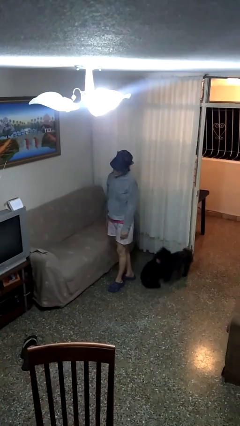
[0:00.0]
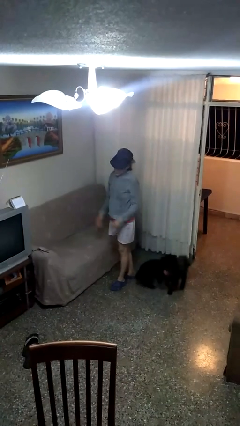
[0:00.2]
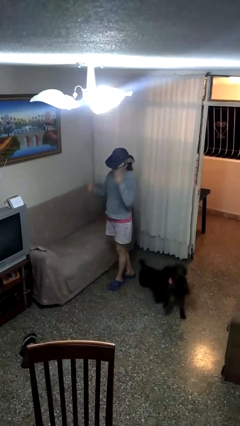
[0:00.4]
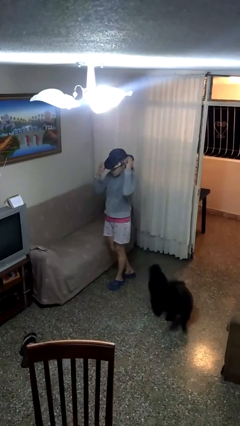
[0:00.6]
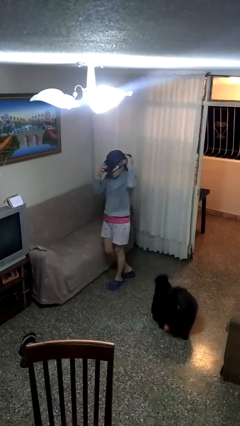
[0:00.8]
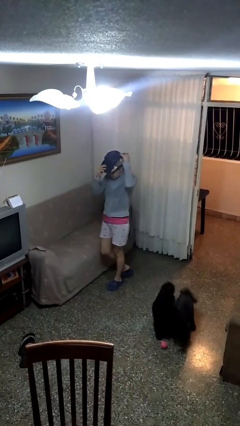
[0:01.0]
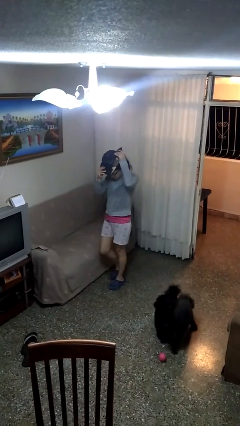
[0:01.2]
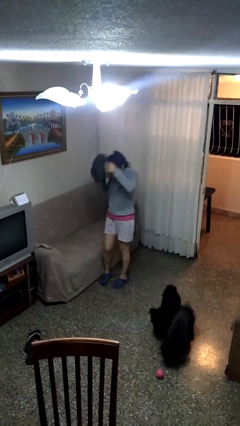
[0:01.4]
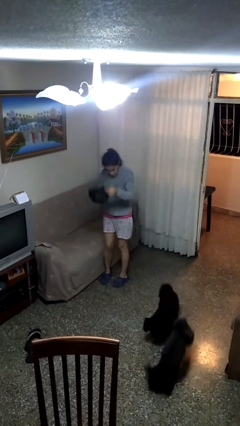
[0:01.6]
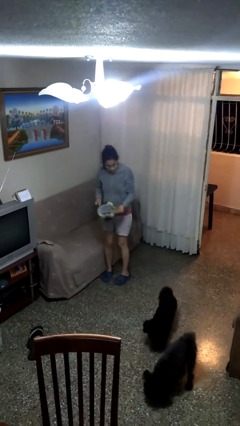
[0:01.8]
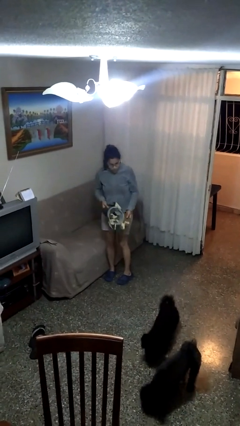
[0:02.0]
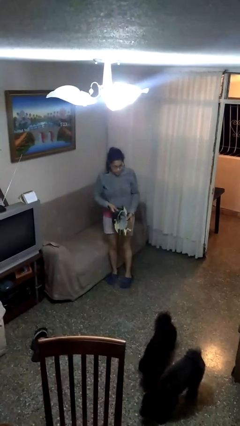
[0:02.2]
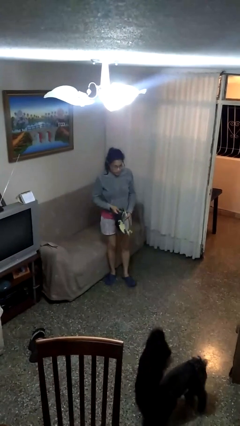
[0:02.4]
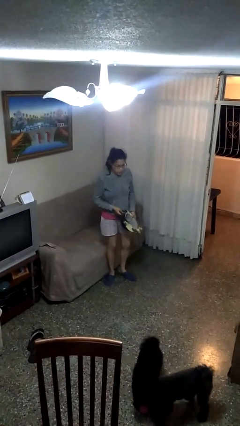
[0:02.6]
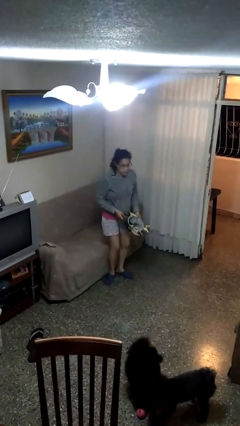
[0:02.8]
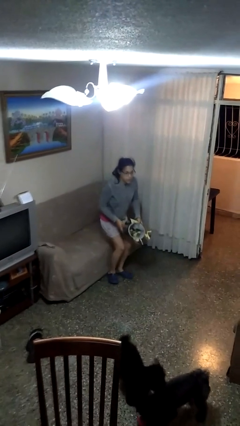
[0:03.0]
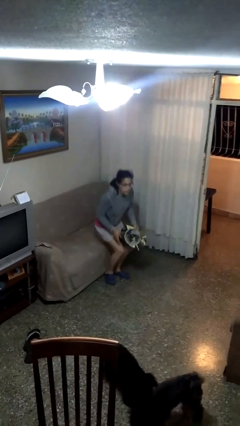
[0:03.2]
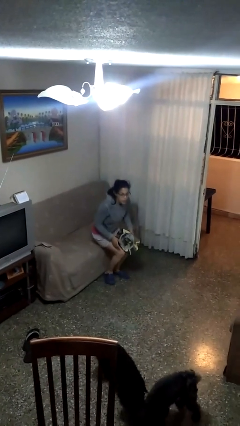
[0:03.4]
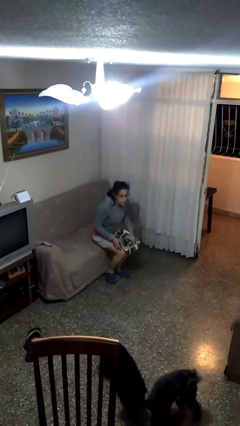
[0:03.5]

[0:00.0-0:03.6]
person takes off hat

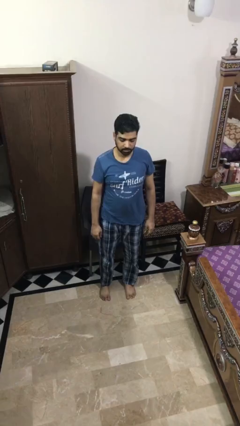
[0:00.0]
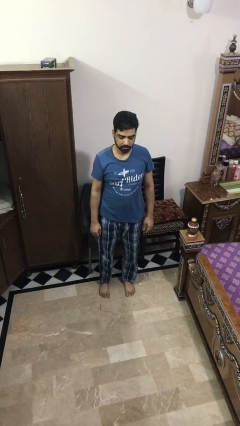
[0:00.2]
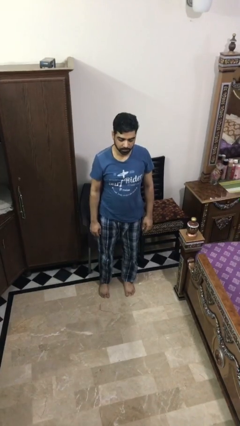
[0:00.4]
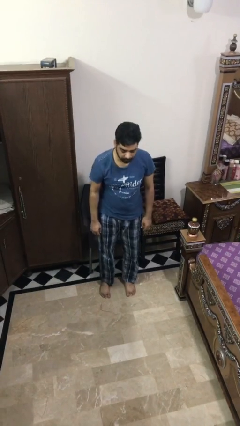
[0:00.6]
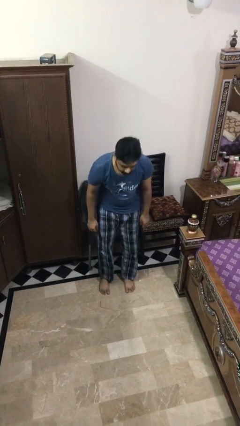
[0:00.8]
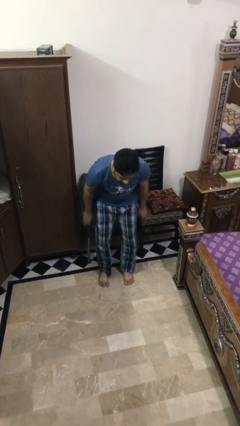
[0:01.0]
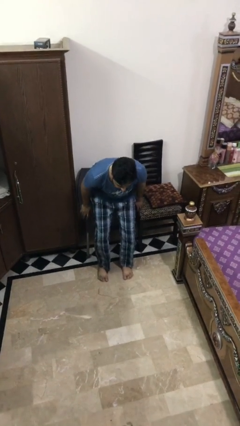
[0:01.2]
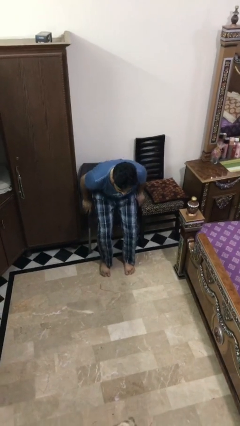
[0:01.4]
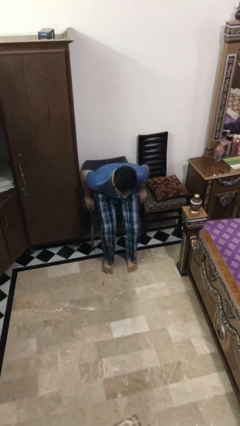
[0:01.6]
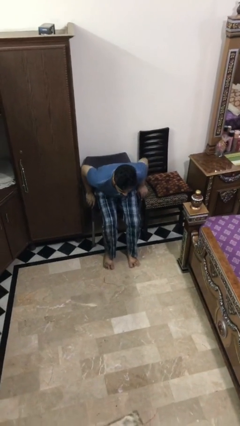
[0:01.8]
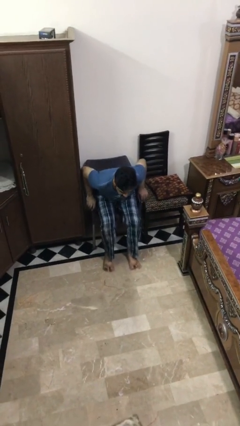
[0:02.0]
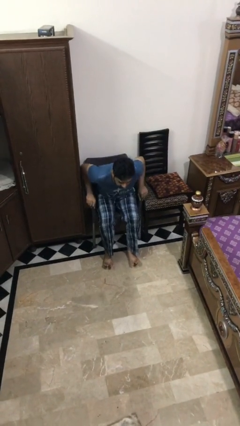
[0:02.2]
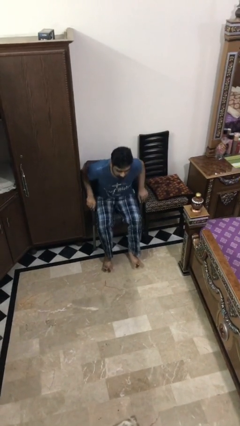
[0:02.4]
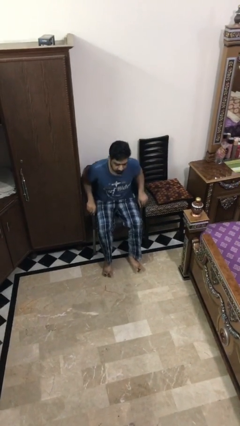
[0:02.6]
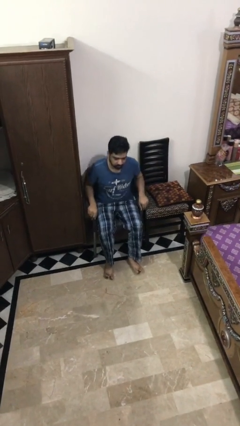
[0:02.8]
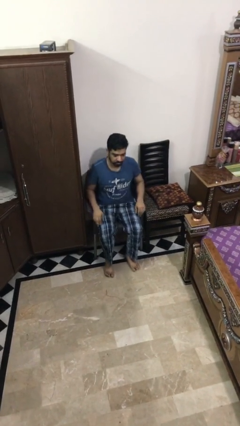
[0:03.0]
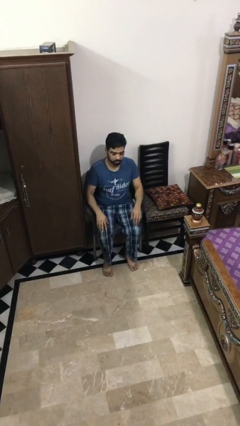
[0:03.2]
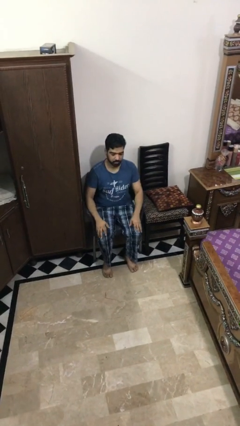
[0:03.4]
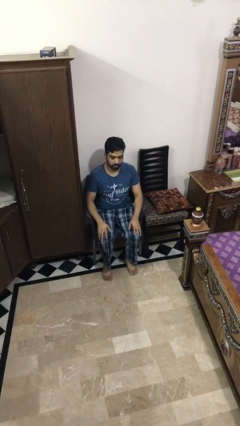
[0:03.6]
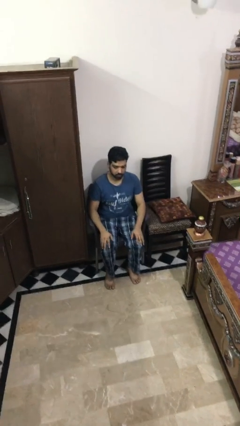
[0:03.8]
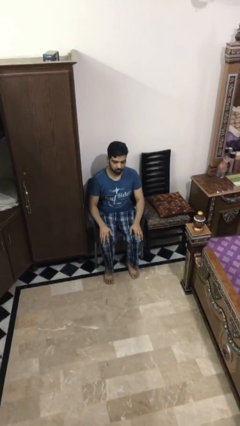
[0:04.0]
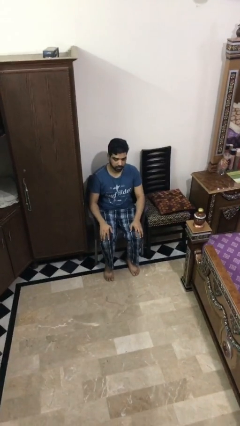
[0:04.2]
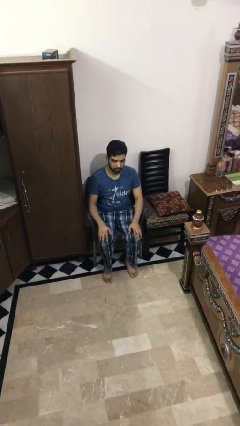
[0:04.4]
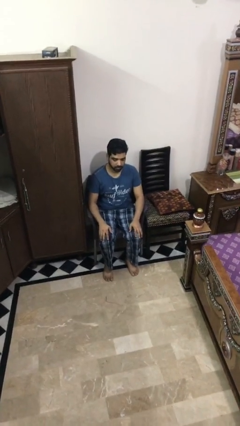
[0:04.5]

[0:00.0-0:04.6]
person sits down

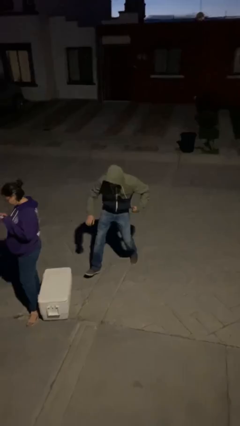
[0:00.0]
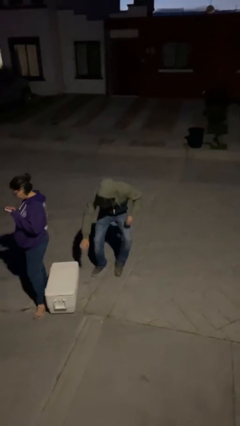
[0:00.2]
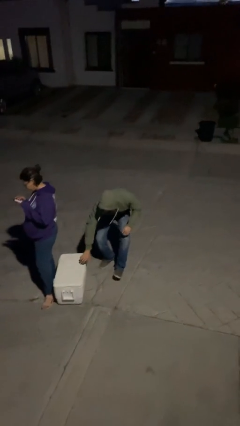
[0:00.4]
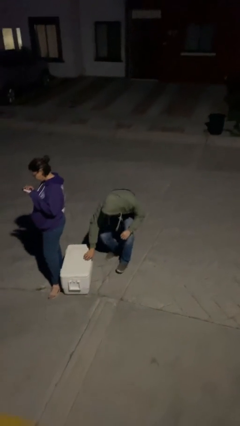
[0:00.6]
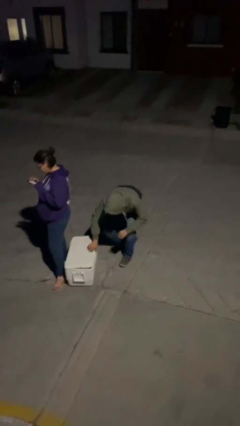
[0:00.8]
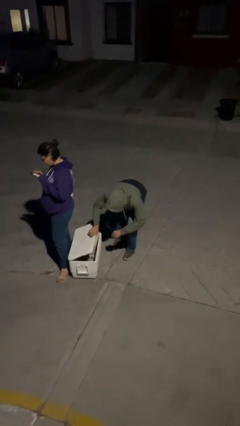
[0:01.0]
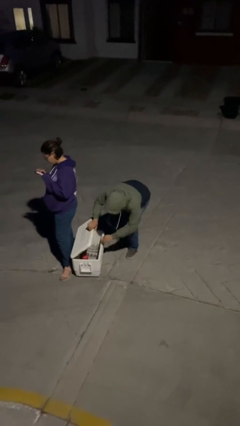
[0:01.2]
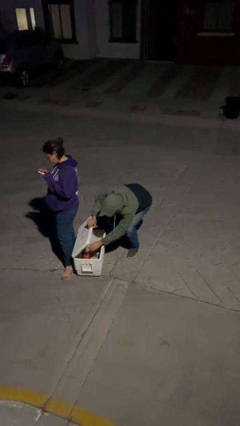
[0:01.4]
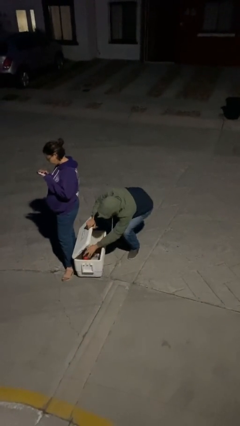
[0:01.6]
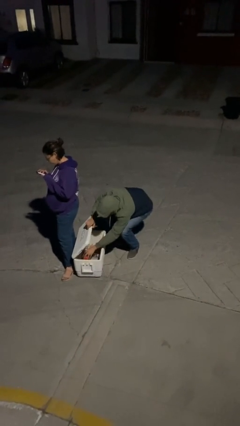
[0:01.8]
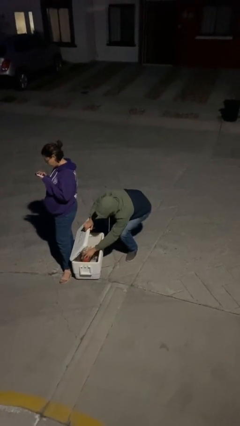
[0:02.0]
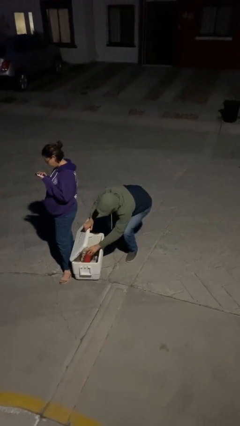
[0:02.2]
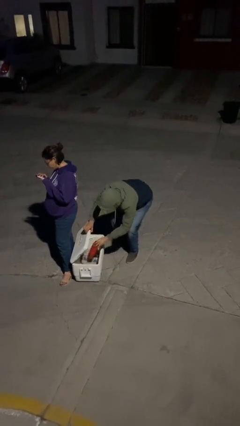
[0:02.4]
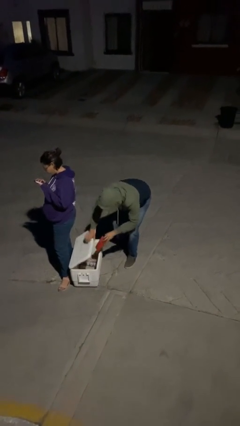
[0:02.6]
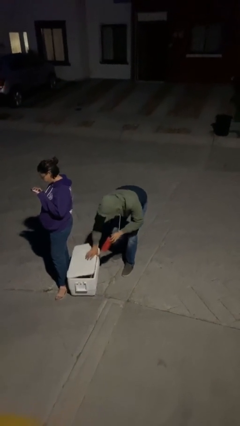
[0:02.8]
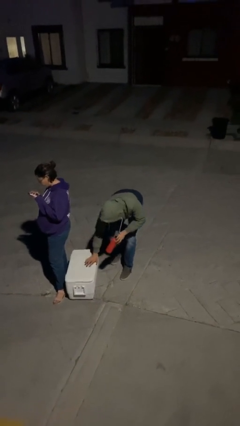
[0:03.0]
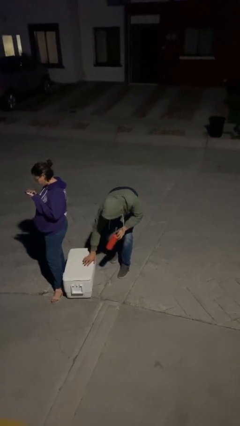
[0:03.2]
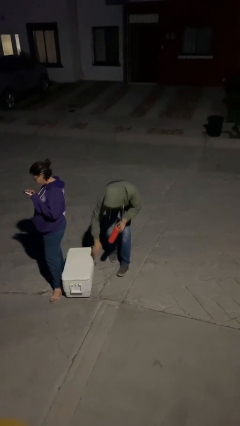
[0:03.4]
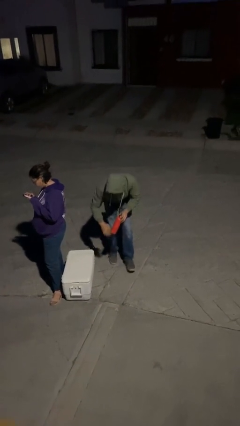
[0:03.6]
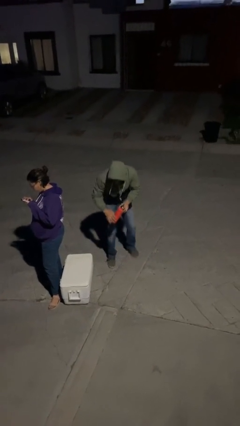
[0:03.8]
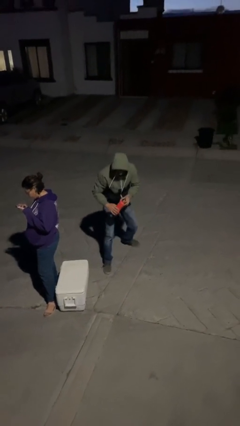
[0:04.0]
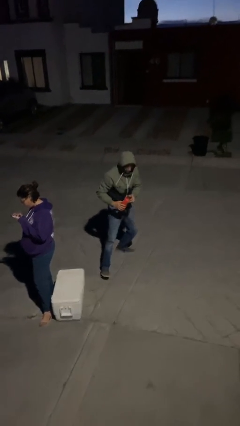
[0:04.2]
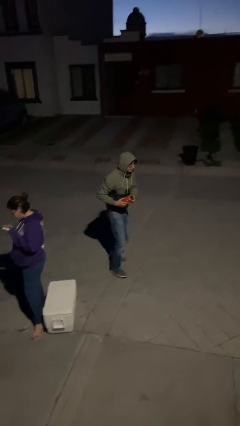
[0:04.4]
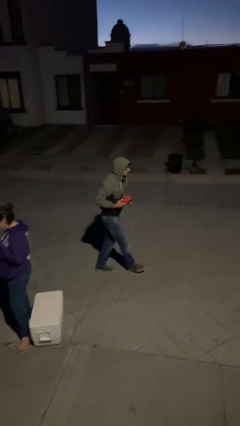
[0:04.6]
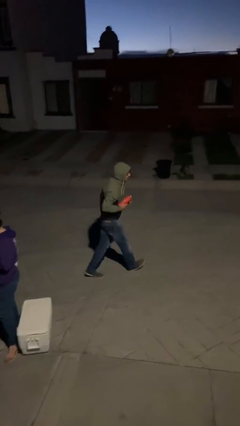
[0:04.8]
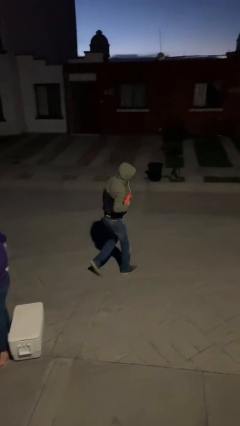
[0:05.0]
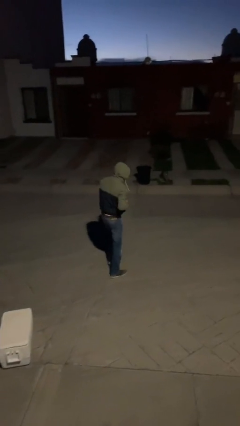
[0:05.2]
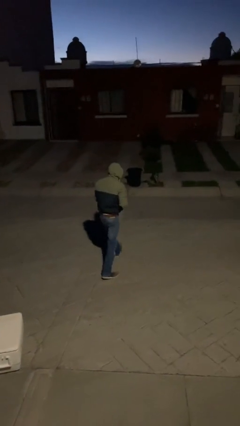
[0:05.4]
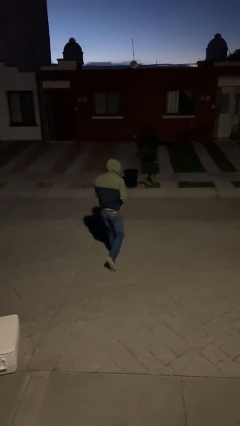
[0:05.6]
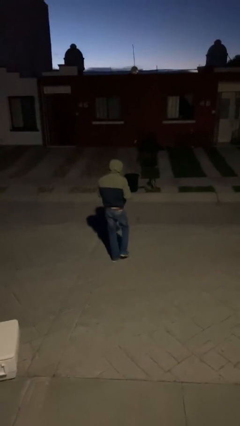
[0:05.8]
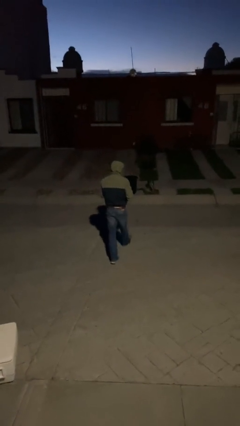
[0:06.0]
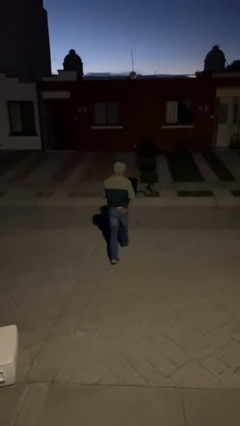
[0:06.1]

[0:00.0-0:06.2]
person steals object from person

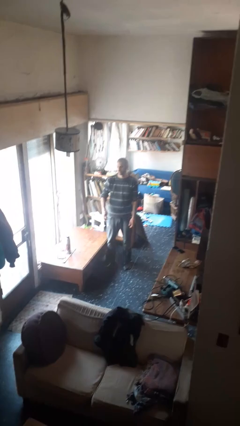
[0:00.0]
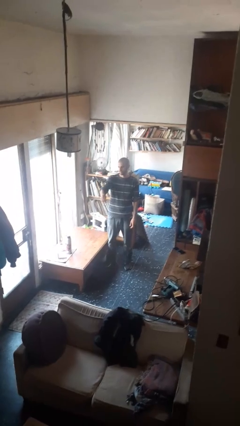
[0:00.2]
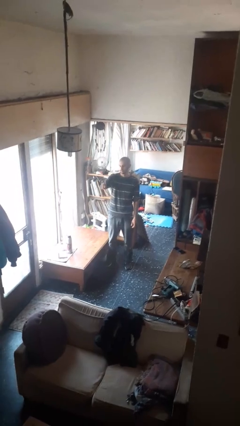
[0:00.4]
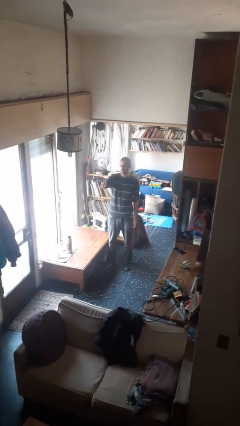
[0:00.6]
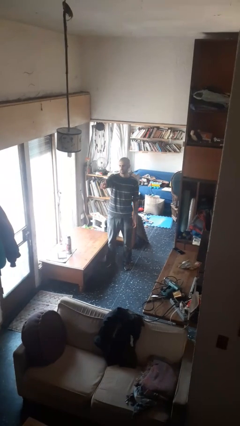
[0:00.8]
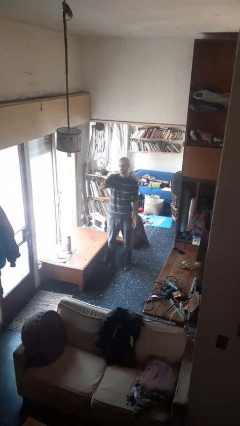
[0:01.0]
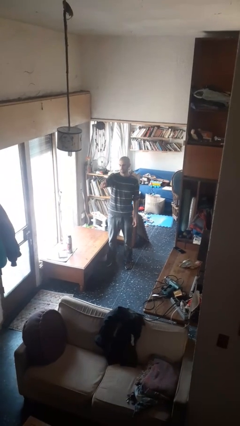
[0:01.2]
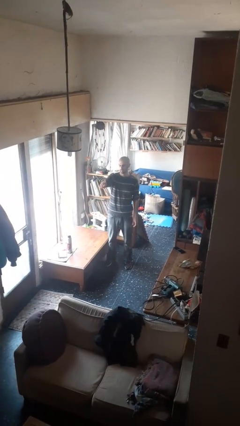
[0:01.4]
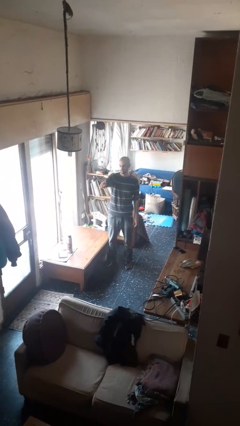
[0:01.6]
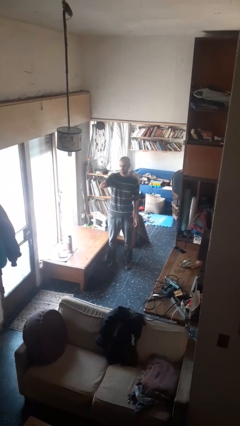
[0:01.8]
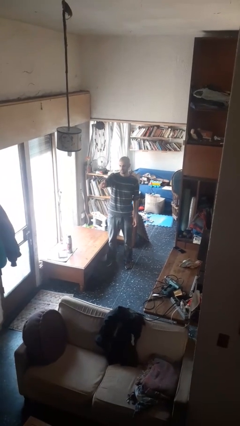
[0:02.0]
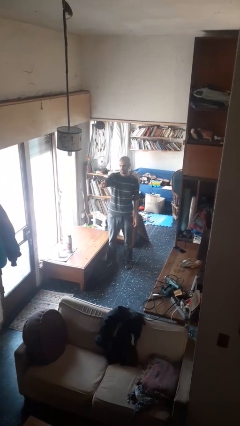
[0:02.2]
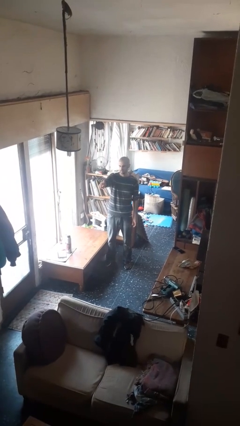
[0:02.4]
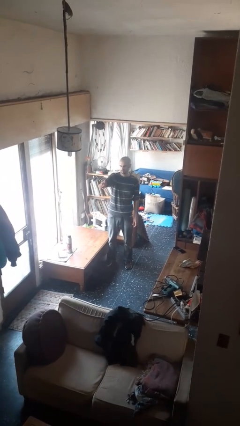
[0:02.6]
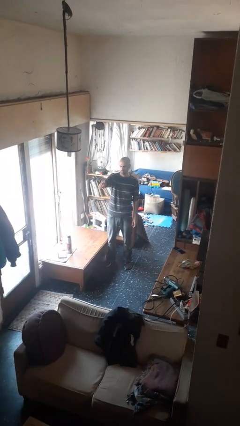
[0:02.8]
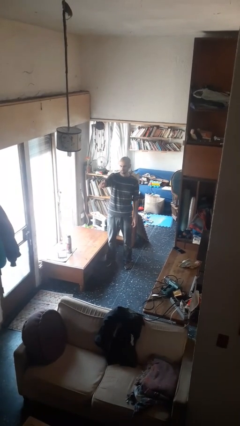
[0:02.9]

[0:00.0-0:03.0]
person gestures number one
